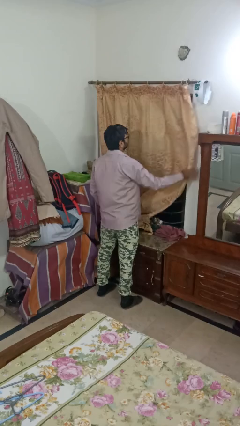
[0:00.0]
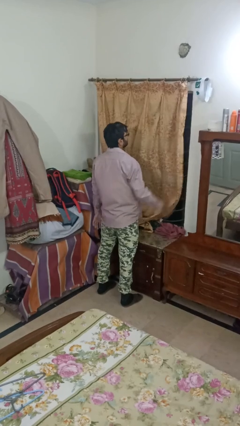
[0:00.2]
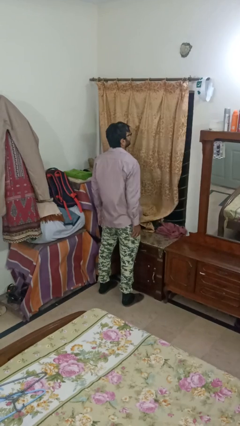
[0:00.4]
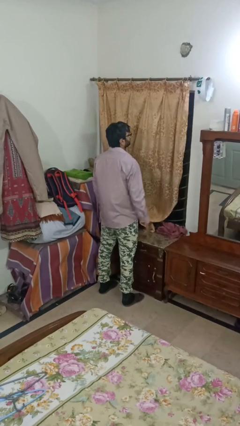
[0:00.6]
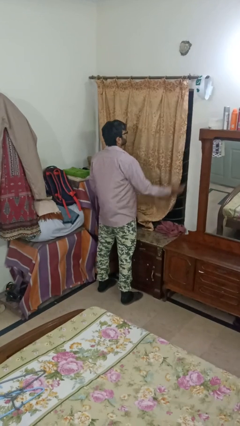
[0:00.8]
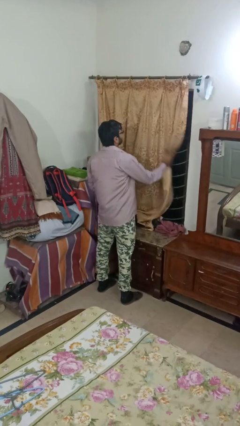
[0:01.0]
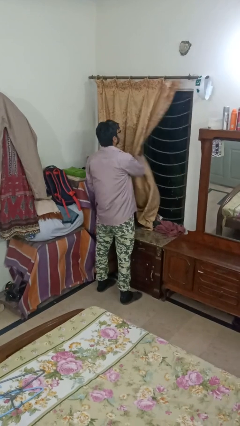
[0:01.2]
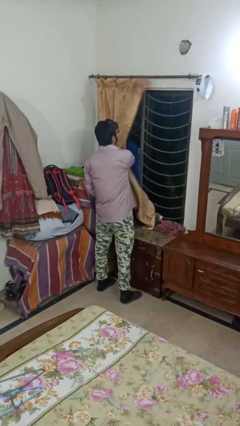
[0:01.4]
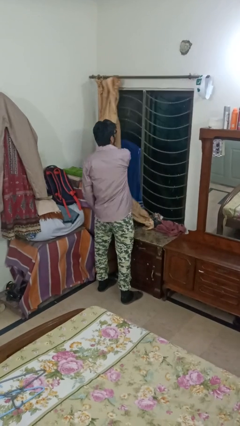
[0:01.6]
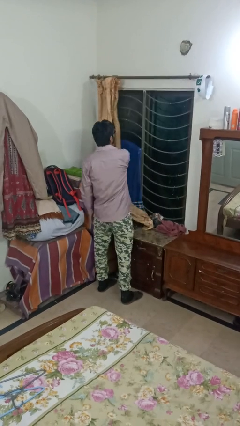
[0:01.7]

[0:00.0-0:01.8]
person opens curtains

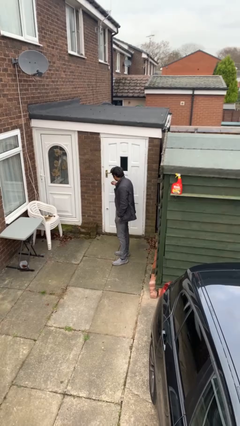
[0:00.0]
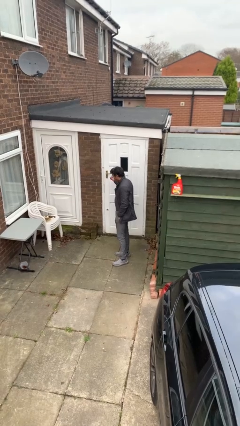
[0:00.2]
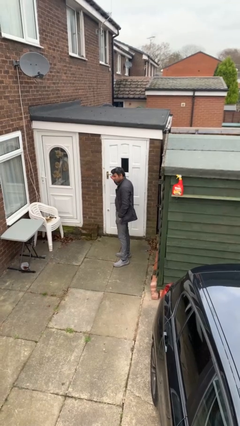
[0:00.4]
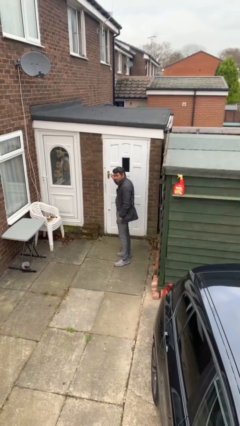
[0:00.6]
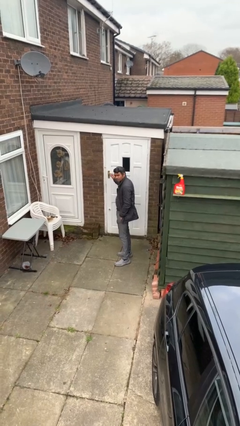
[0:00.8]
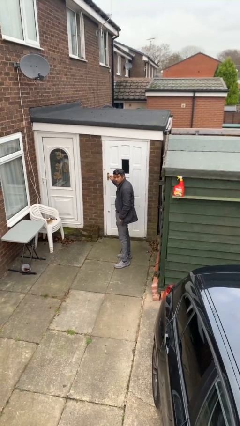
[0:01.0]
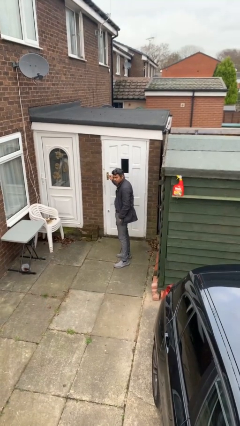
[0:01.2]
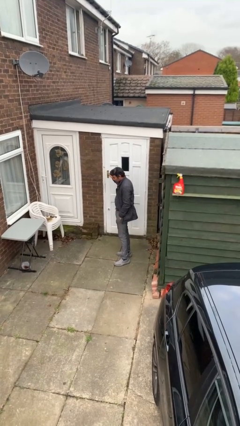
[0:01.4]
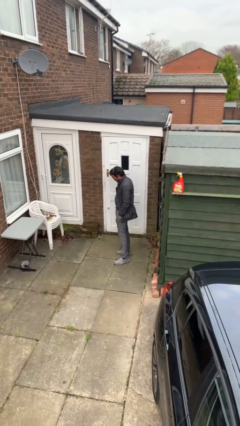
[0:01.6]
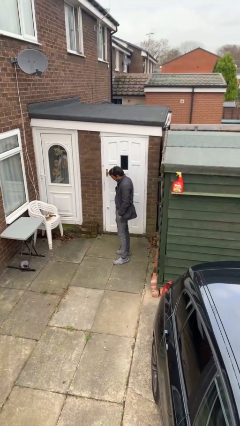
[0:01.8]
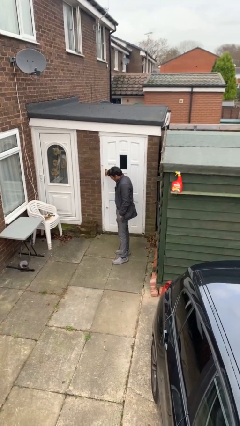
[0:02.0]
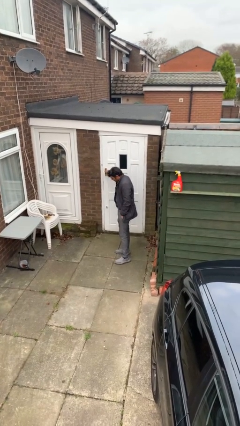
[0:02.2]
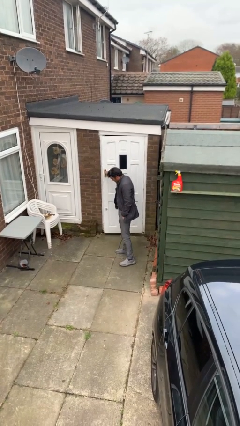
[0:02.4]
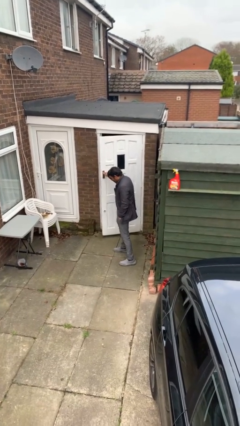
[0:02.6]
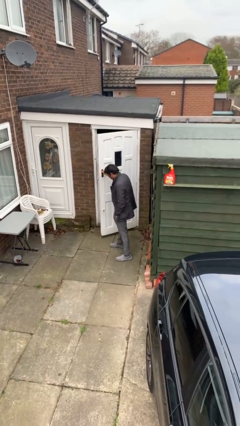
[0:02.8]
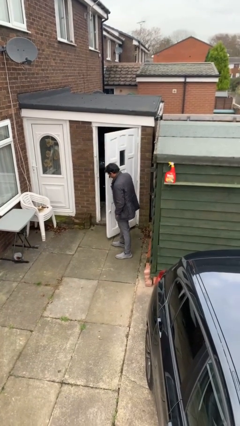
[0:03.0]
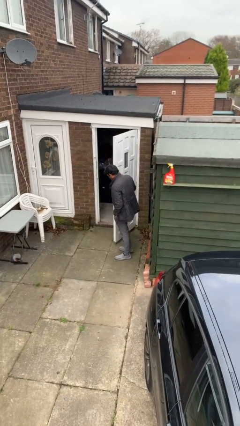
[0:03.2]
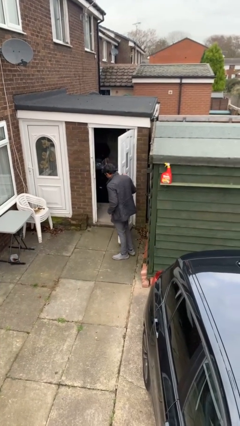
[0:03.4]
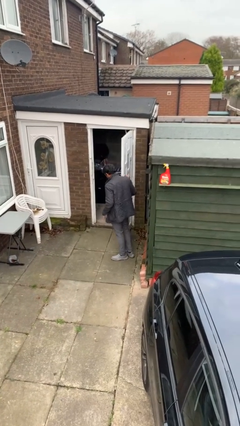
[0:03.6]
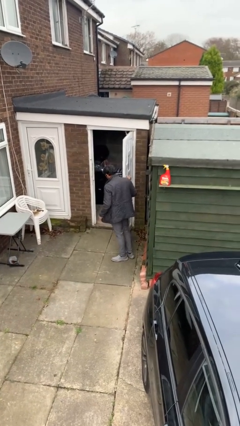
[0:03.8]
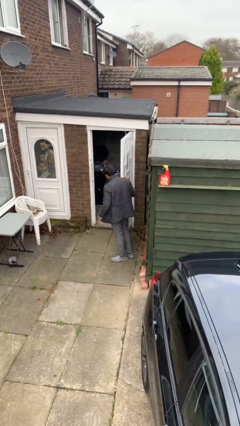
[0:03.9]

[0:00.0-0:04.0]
person opens facility door

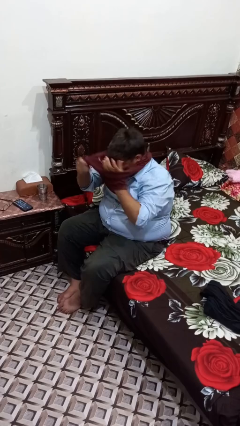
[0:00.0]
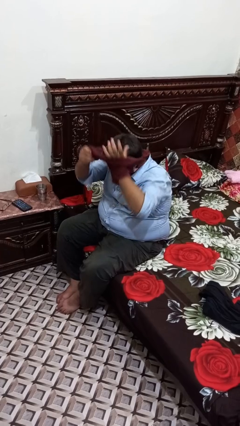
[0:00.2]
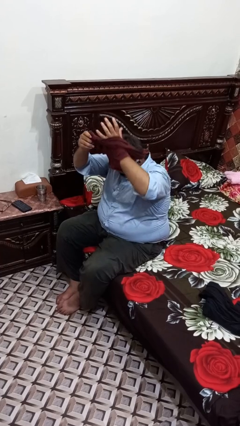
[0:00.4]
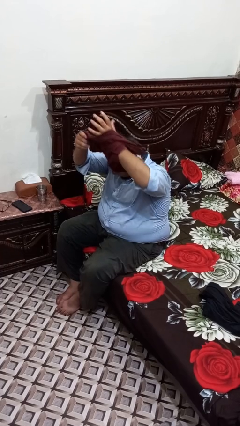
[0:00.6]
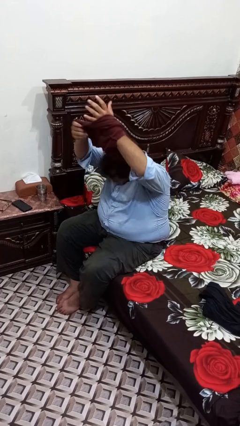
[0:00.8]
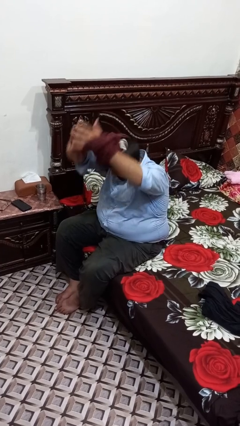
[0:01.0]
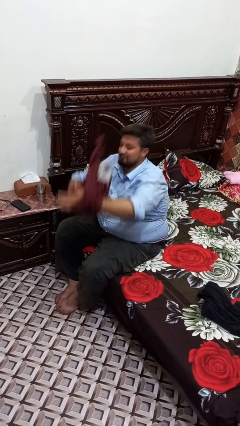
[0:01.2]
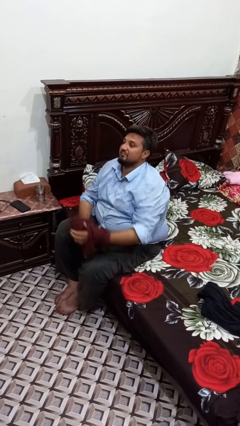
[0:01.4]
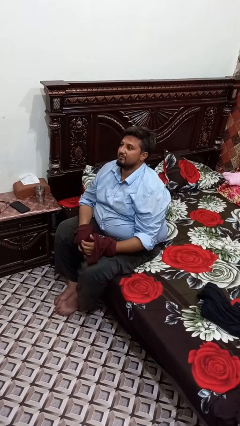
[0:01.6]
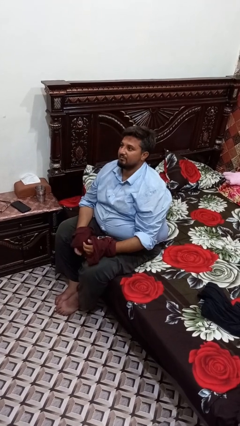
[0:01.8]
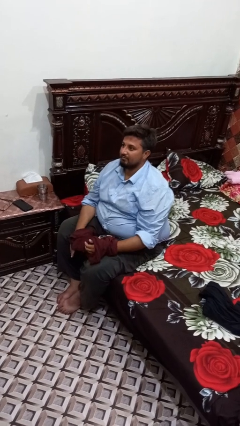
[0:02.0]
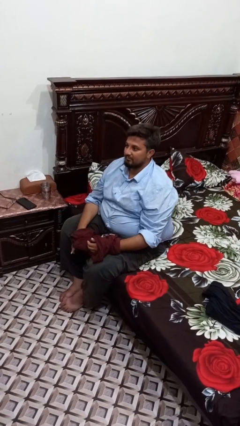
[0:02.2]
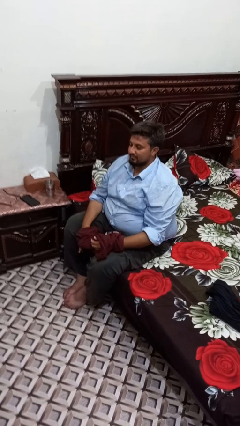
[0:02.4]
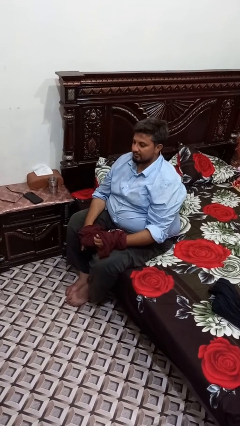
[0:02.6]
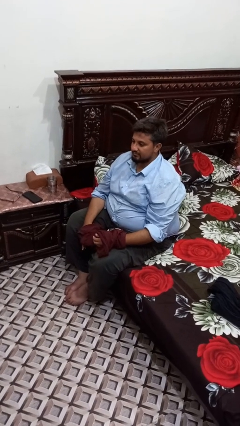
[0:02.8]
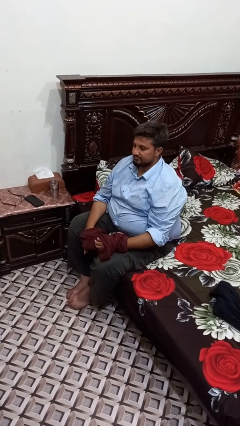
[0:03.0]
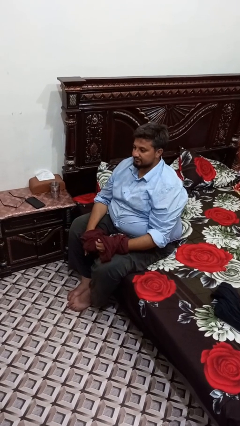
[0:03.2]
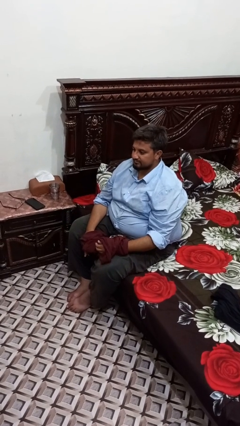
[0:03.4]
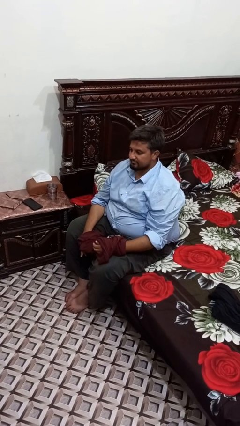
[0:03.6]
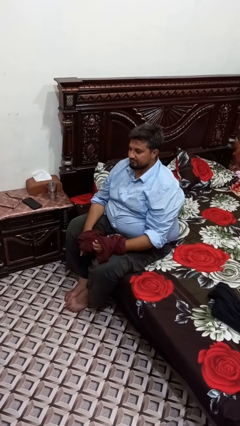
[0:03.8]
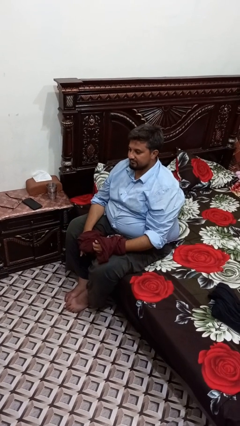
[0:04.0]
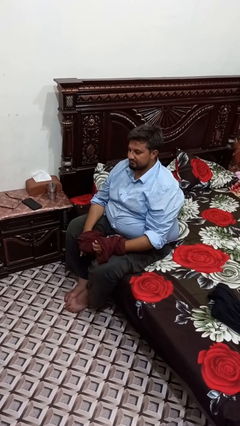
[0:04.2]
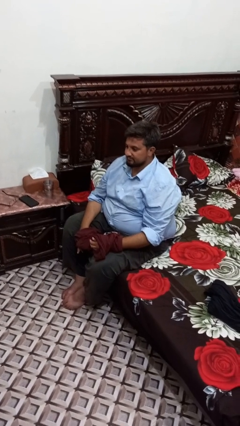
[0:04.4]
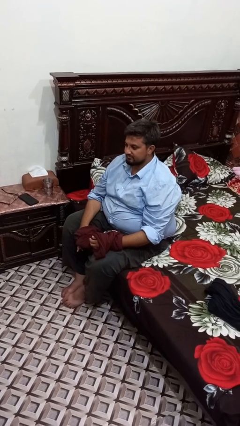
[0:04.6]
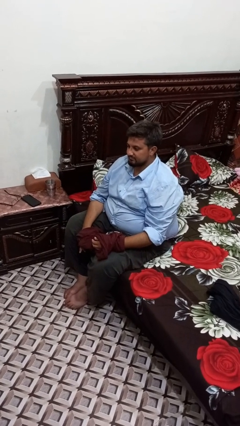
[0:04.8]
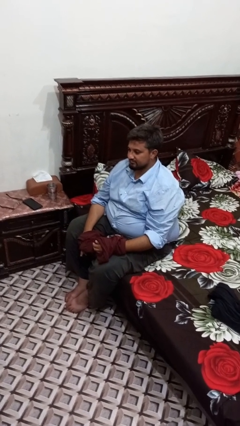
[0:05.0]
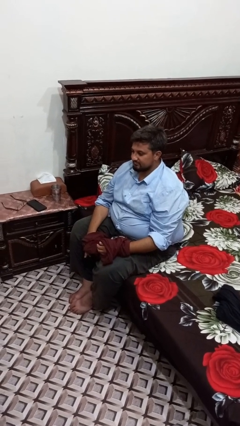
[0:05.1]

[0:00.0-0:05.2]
person takes off shirt

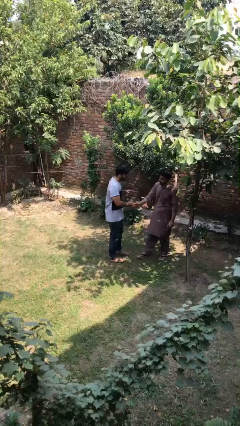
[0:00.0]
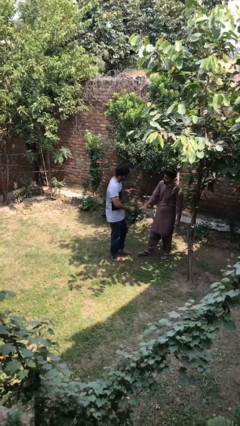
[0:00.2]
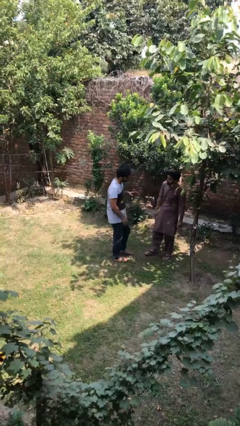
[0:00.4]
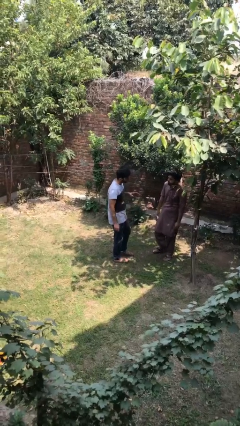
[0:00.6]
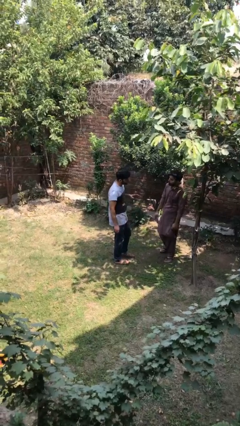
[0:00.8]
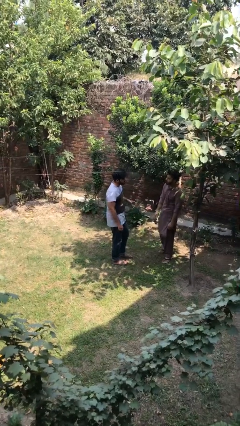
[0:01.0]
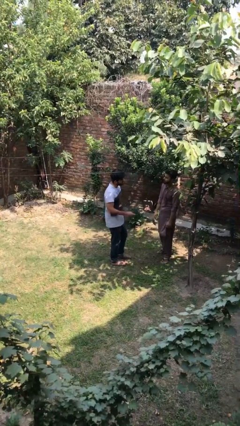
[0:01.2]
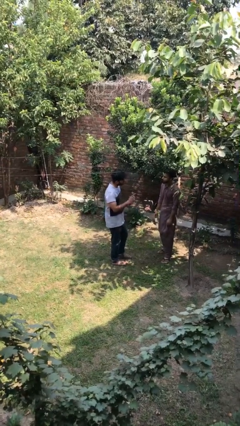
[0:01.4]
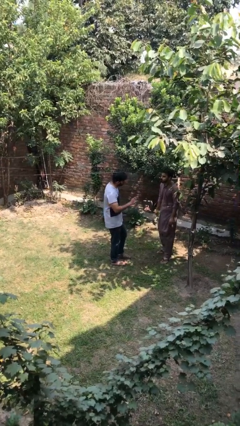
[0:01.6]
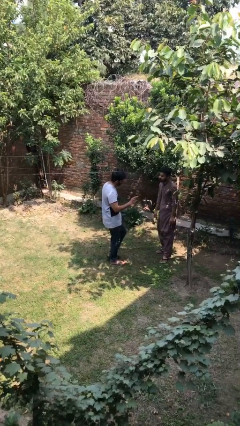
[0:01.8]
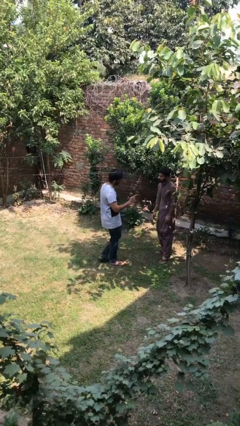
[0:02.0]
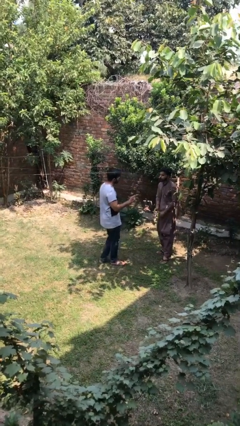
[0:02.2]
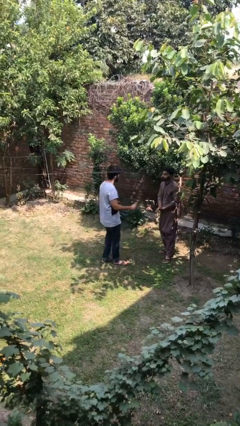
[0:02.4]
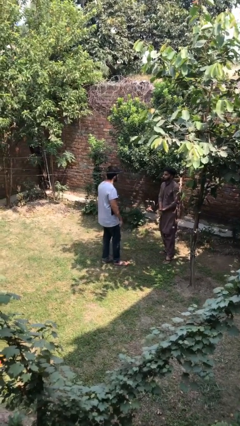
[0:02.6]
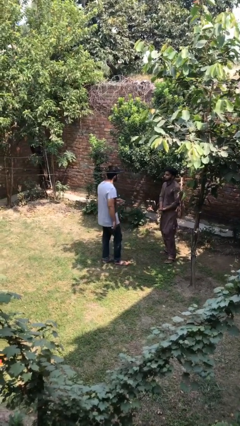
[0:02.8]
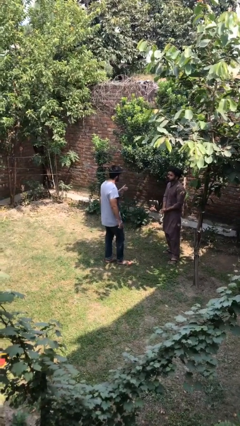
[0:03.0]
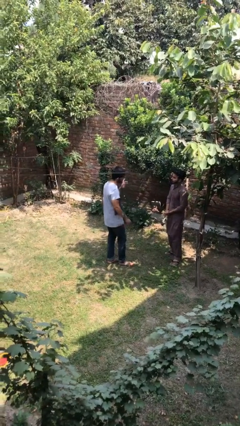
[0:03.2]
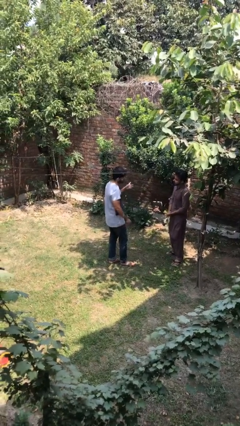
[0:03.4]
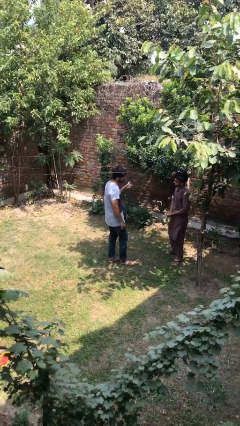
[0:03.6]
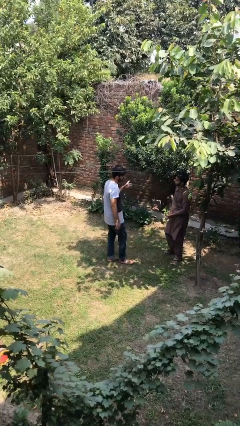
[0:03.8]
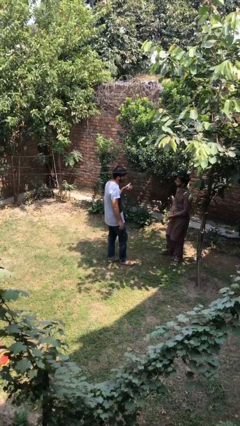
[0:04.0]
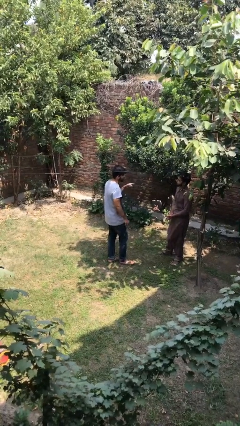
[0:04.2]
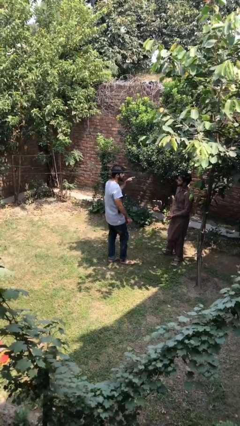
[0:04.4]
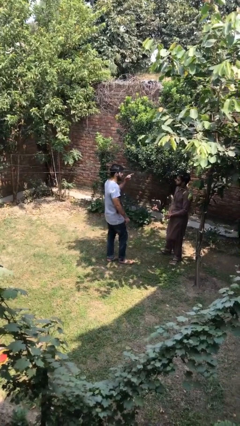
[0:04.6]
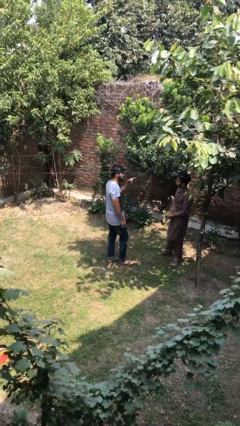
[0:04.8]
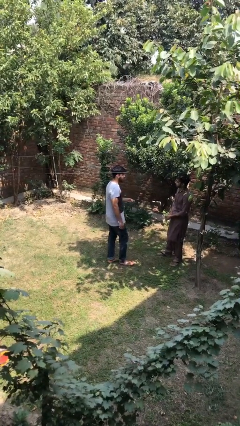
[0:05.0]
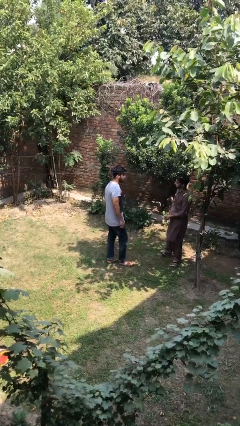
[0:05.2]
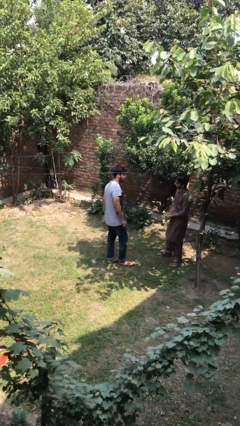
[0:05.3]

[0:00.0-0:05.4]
person talks to person

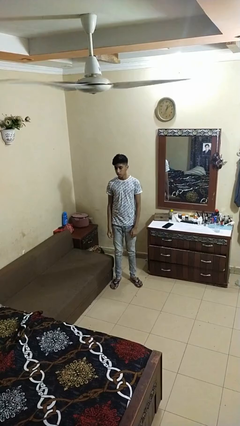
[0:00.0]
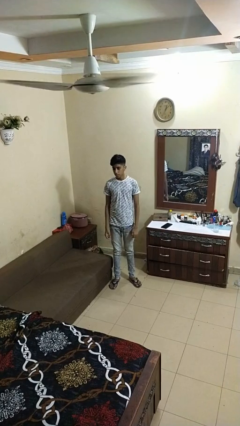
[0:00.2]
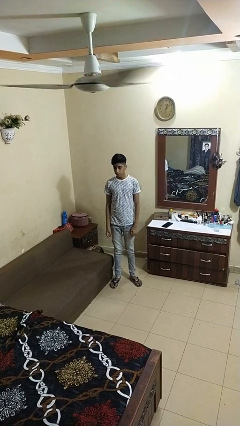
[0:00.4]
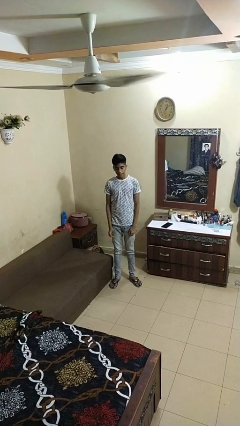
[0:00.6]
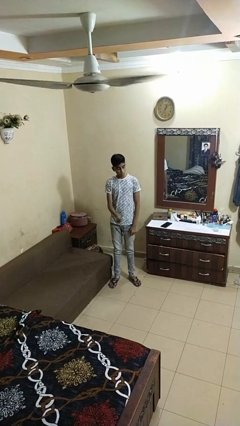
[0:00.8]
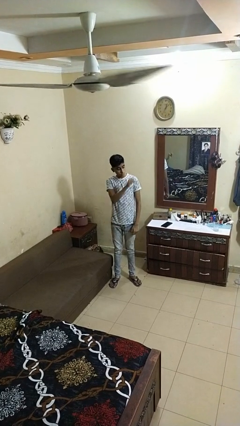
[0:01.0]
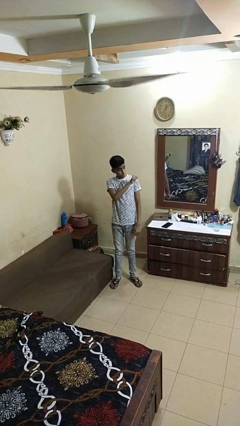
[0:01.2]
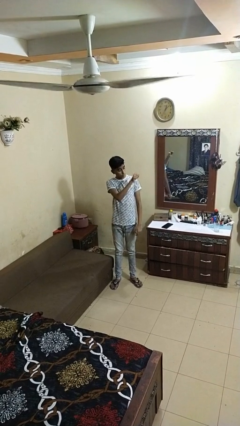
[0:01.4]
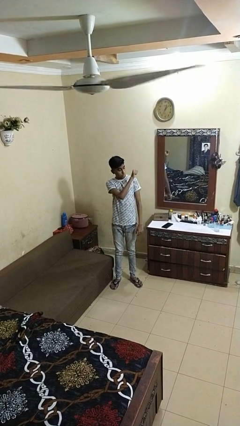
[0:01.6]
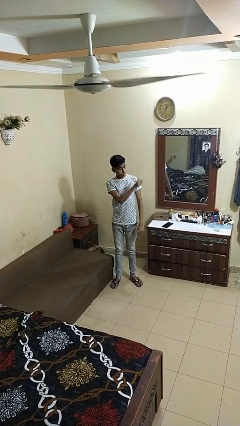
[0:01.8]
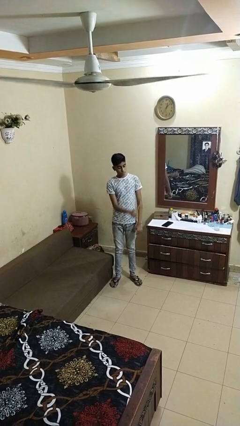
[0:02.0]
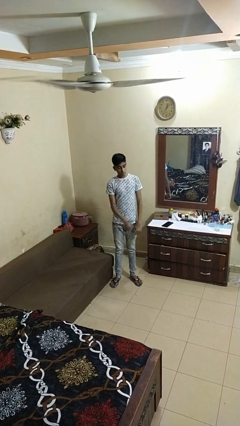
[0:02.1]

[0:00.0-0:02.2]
person gestures behind me
